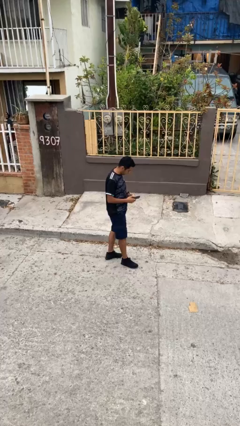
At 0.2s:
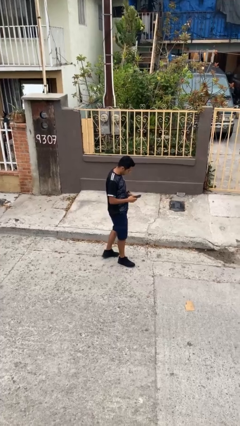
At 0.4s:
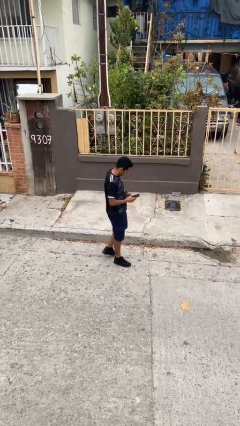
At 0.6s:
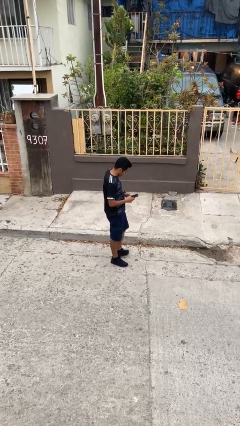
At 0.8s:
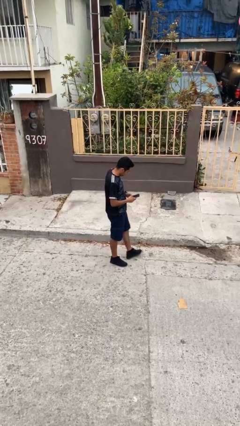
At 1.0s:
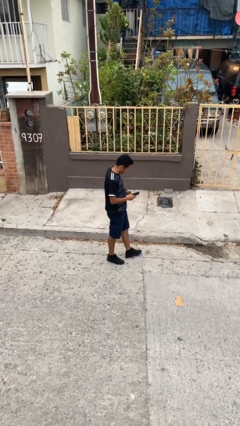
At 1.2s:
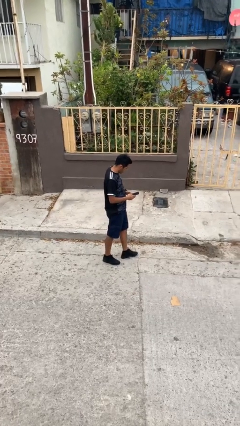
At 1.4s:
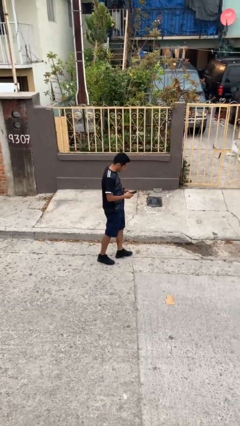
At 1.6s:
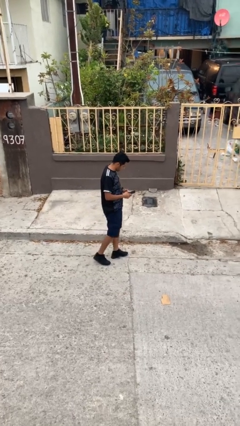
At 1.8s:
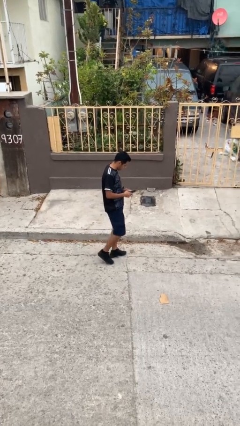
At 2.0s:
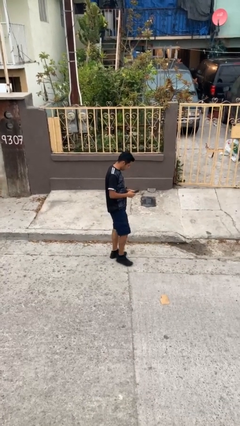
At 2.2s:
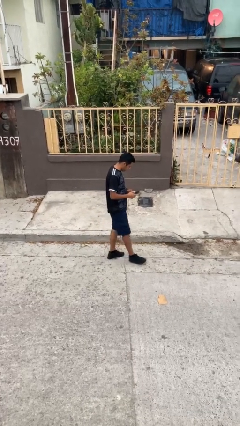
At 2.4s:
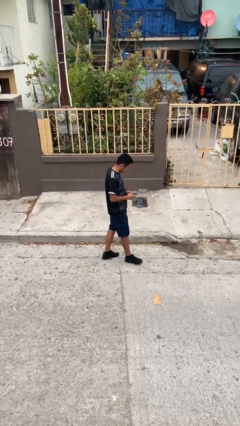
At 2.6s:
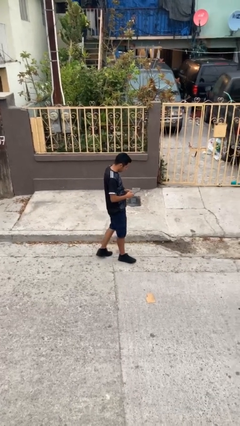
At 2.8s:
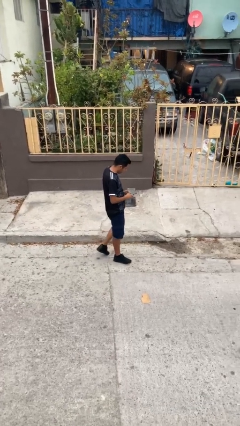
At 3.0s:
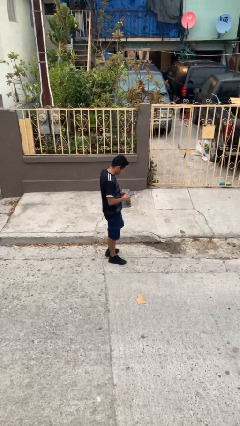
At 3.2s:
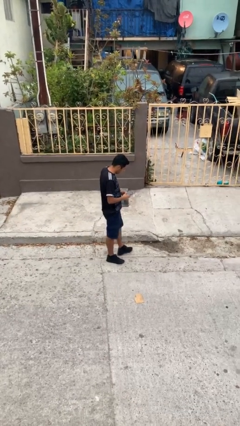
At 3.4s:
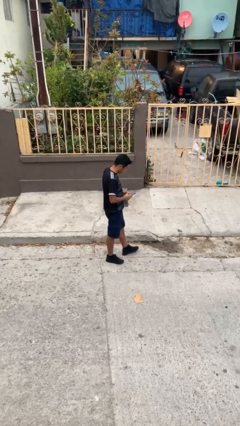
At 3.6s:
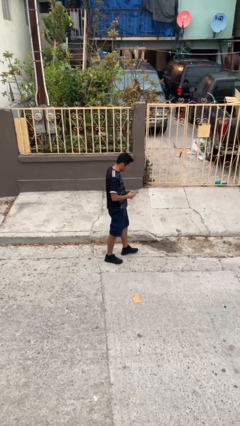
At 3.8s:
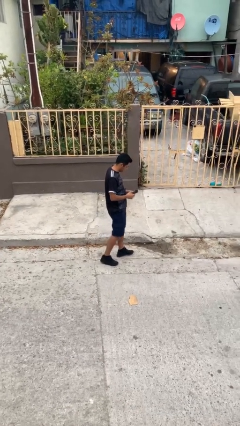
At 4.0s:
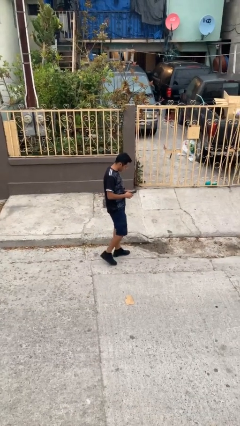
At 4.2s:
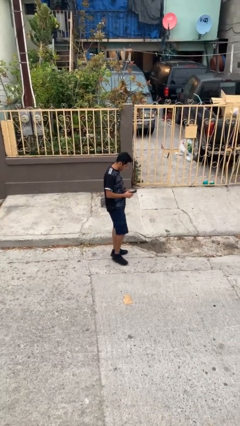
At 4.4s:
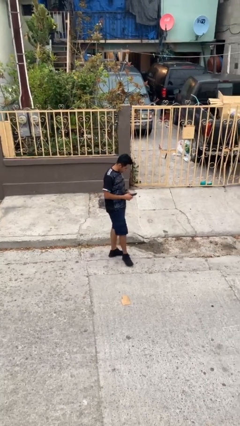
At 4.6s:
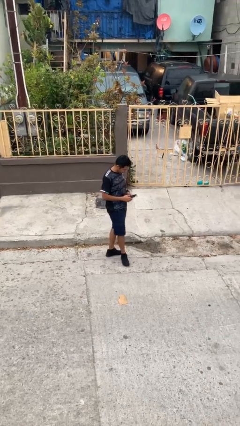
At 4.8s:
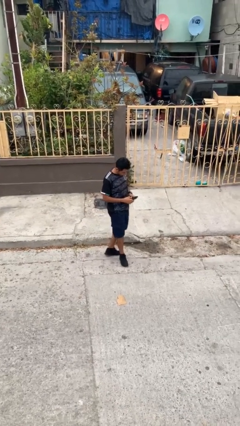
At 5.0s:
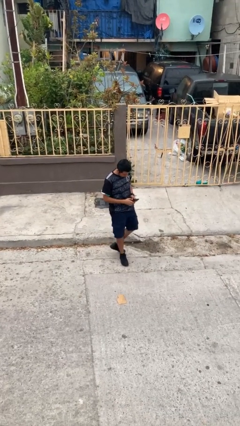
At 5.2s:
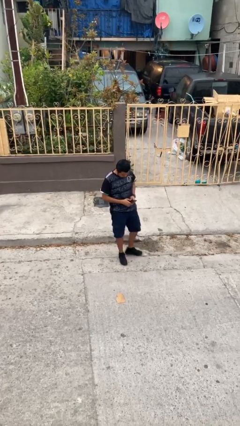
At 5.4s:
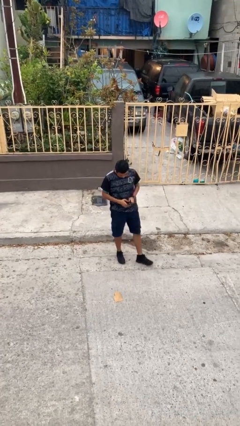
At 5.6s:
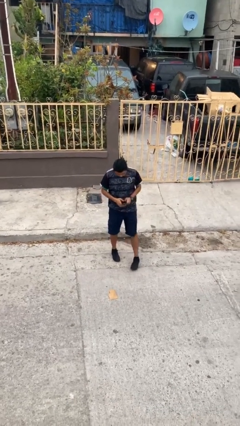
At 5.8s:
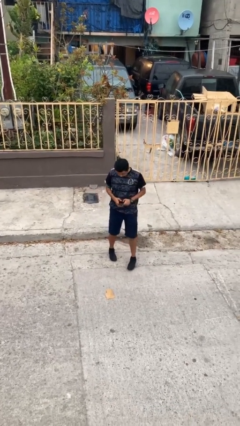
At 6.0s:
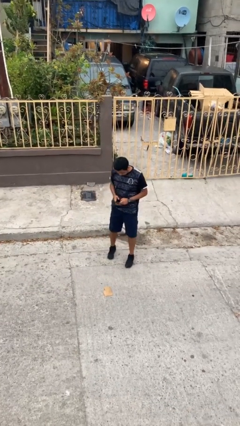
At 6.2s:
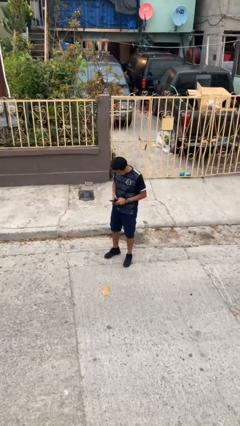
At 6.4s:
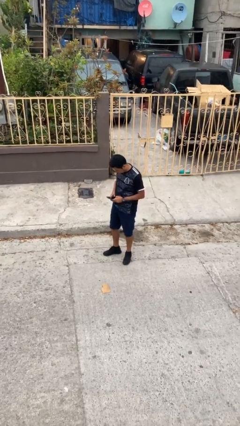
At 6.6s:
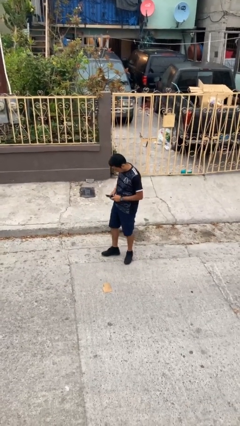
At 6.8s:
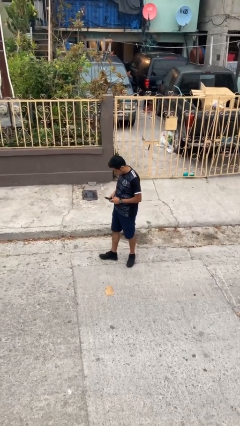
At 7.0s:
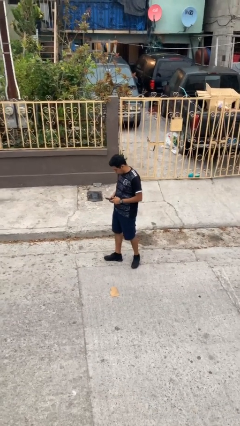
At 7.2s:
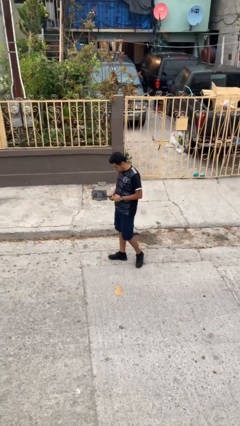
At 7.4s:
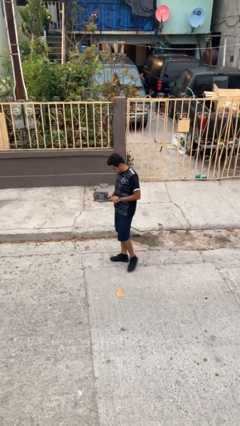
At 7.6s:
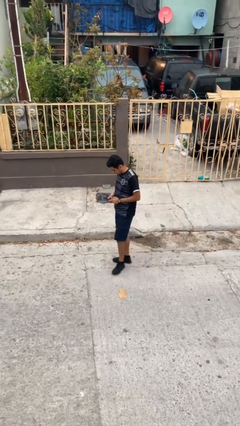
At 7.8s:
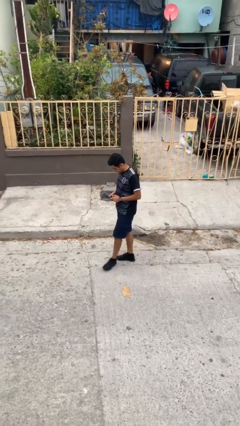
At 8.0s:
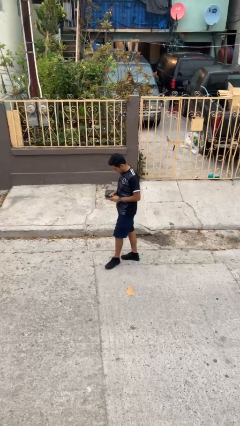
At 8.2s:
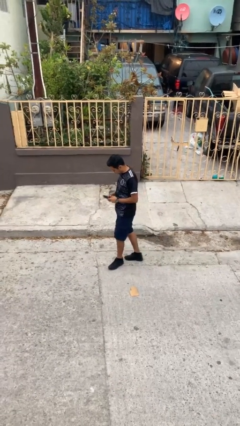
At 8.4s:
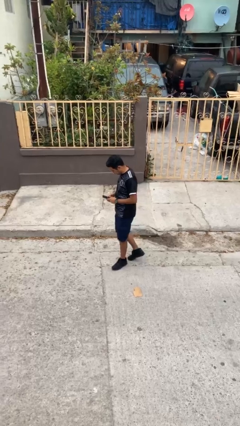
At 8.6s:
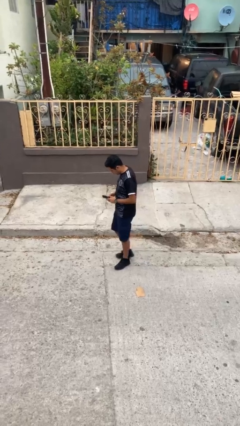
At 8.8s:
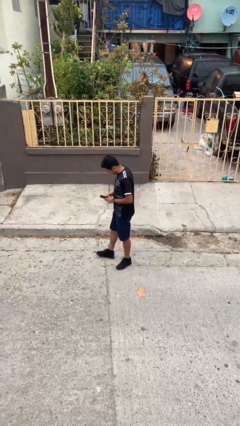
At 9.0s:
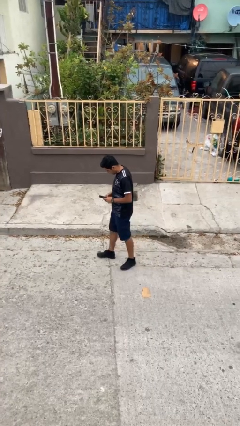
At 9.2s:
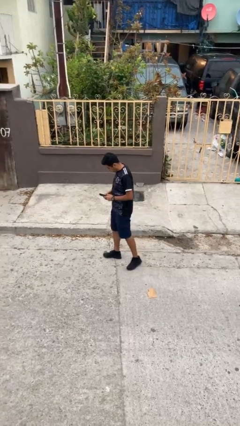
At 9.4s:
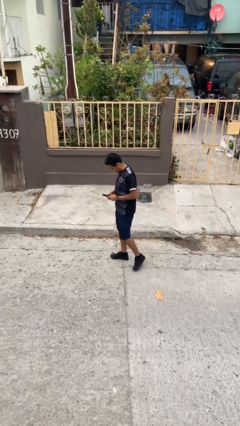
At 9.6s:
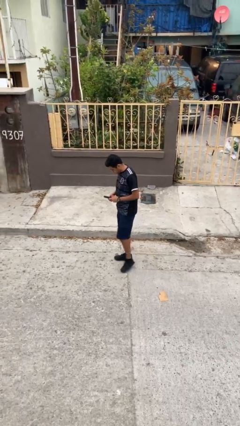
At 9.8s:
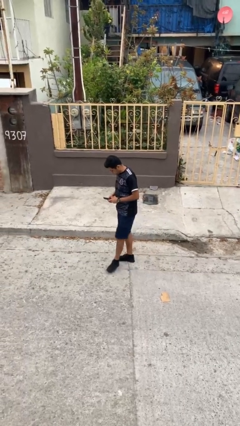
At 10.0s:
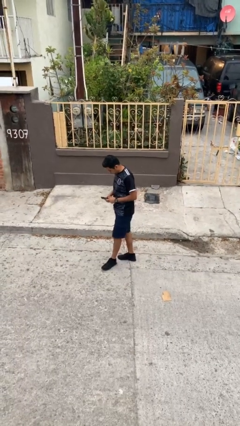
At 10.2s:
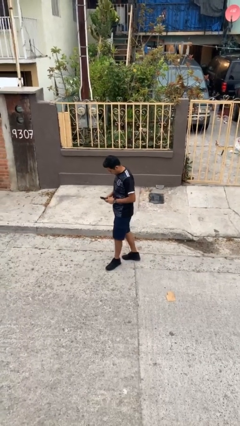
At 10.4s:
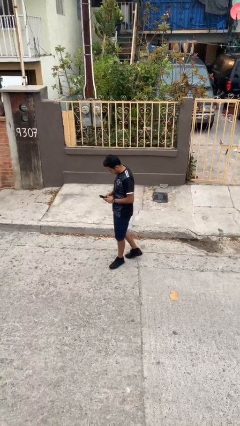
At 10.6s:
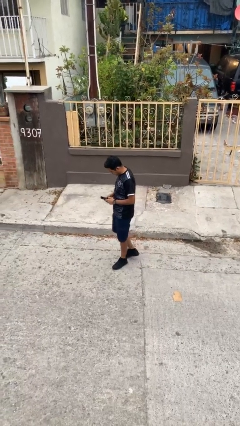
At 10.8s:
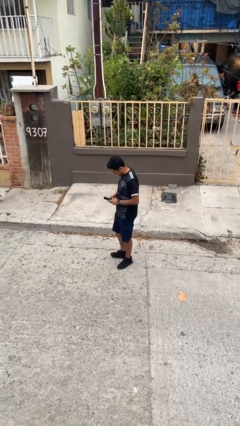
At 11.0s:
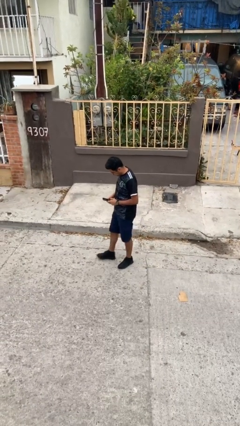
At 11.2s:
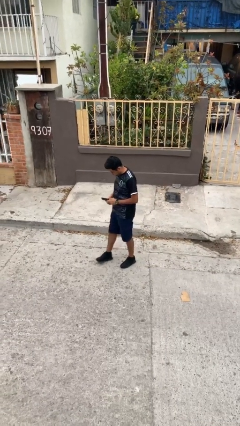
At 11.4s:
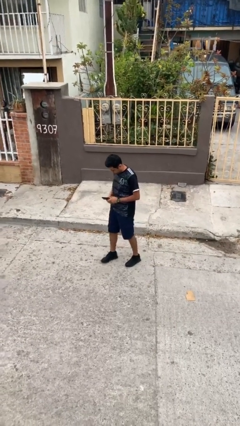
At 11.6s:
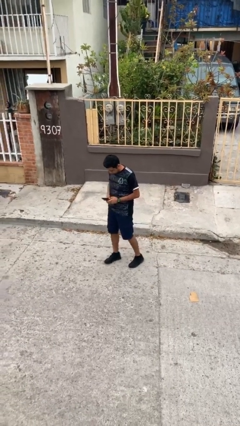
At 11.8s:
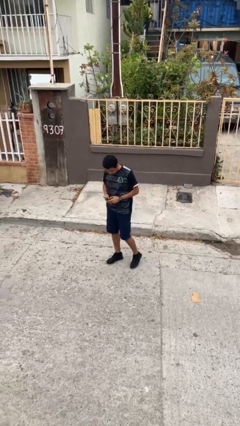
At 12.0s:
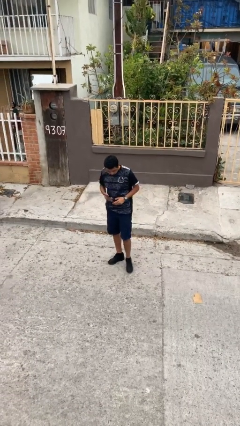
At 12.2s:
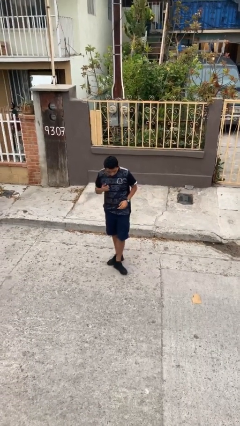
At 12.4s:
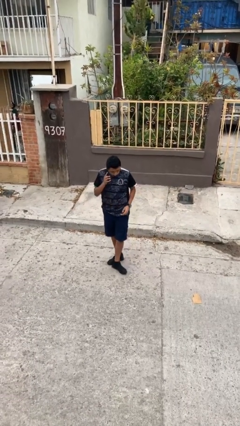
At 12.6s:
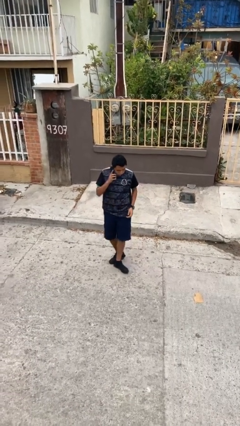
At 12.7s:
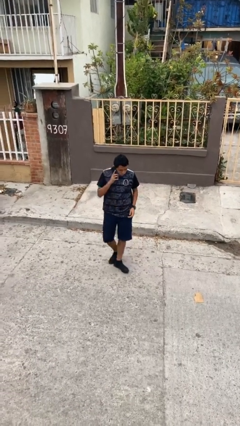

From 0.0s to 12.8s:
person texts on phone

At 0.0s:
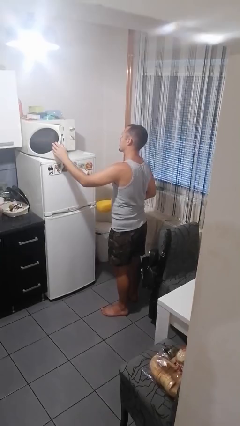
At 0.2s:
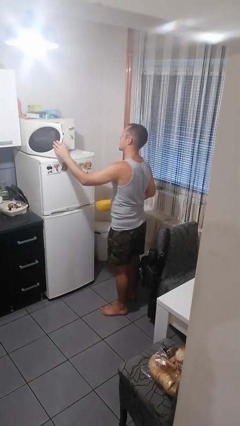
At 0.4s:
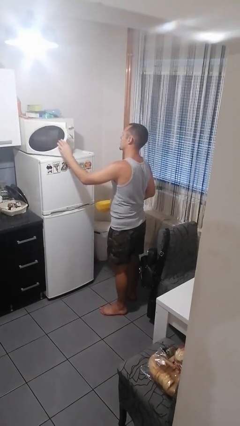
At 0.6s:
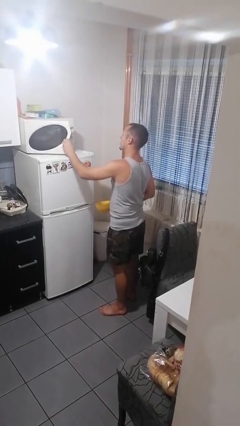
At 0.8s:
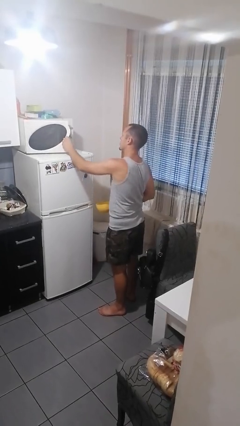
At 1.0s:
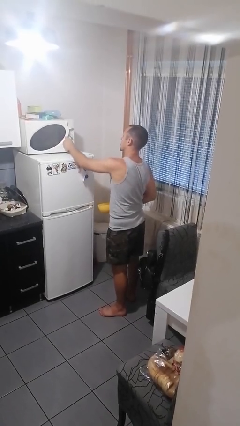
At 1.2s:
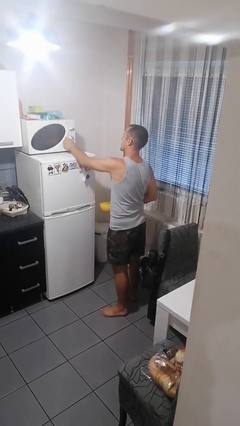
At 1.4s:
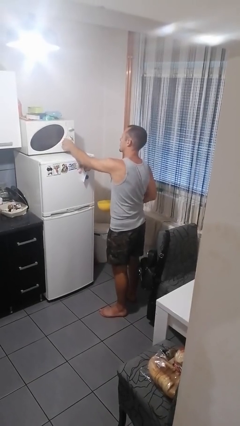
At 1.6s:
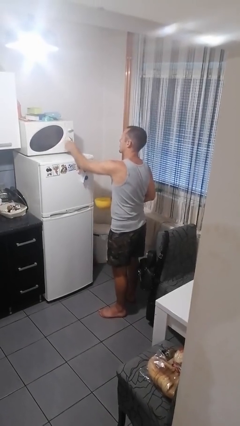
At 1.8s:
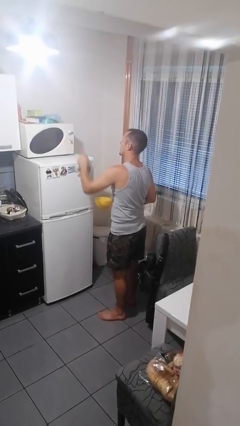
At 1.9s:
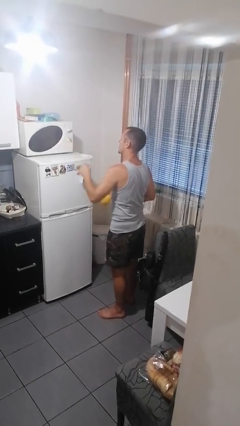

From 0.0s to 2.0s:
person closes microwave

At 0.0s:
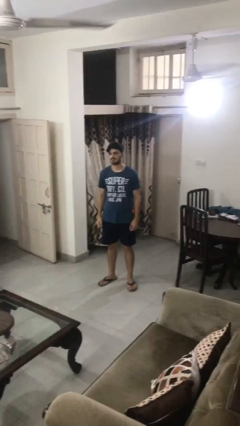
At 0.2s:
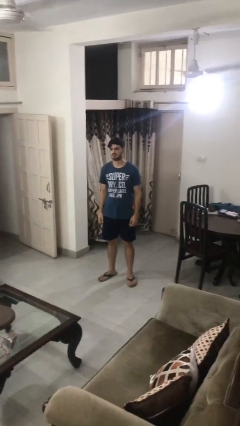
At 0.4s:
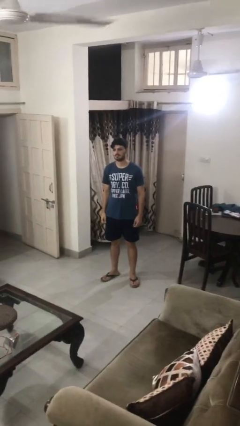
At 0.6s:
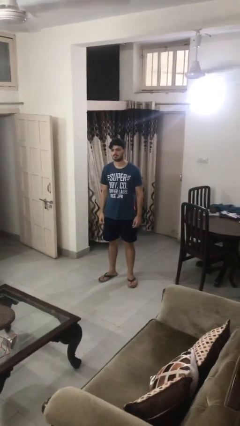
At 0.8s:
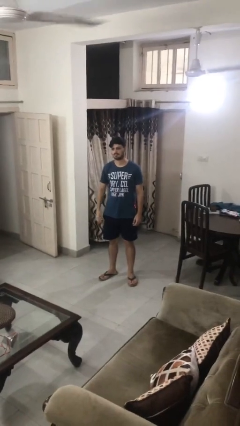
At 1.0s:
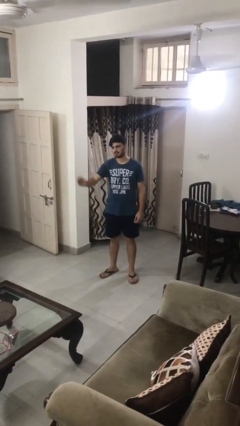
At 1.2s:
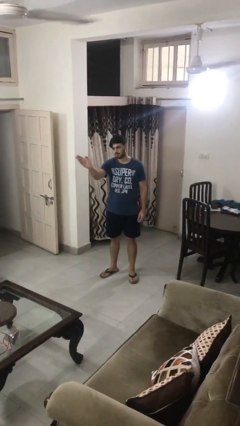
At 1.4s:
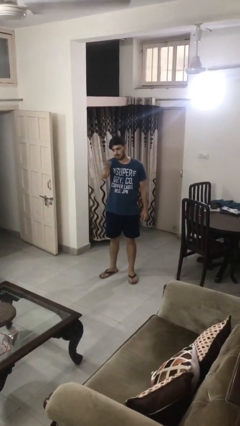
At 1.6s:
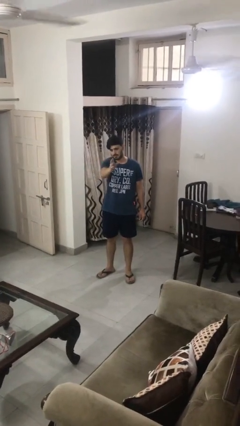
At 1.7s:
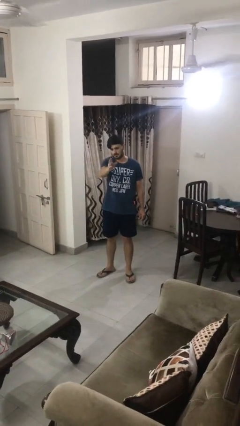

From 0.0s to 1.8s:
person gestures swipe left

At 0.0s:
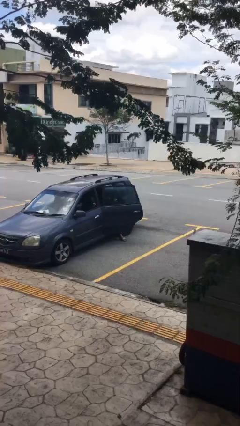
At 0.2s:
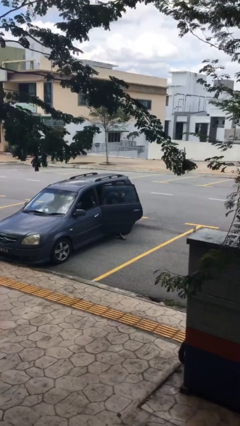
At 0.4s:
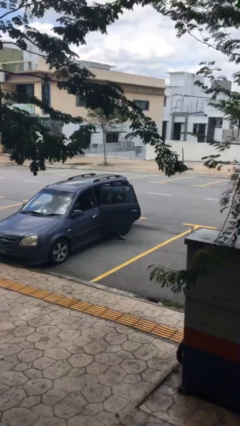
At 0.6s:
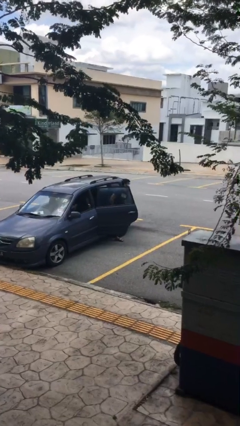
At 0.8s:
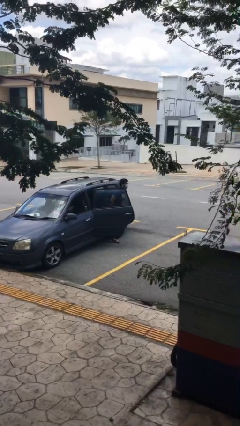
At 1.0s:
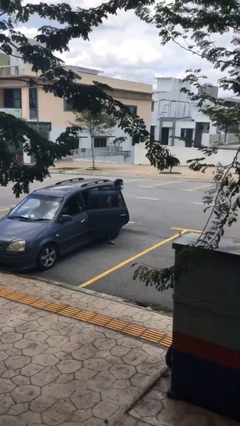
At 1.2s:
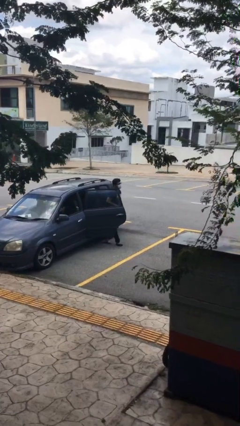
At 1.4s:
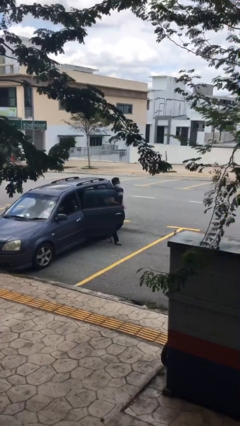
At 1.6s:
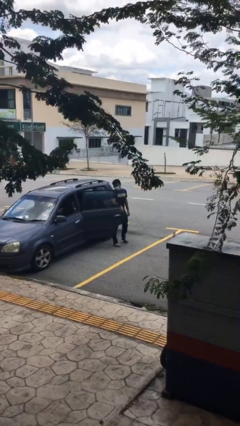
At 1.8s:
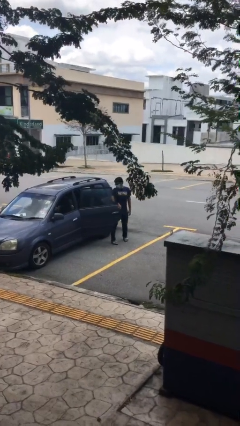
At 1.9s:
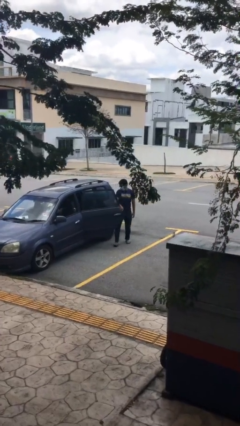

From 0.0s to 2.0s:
person exits car
